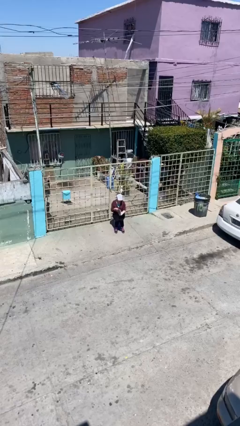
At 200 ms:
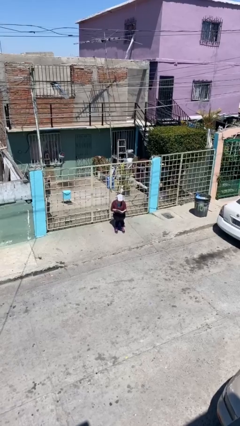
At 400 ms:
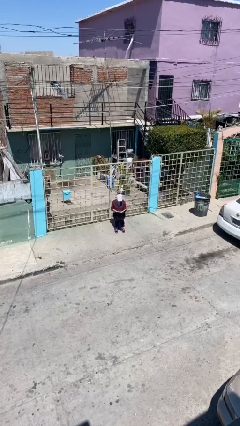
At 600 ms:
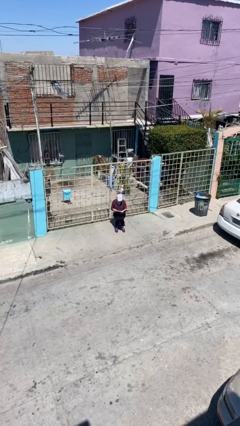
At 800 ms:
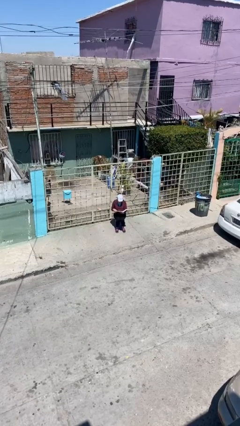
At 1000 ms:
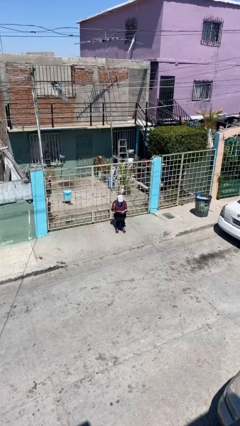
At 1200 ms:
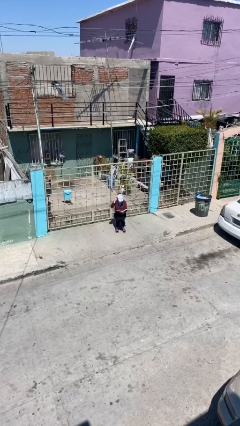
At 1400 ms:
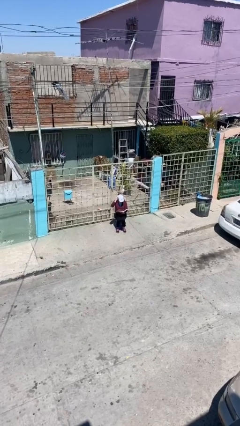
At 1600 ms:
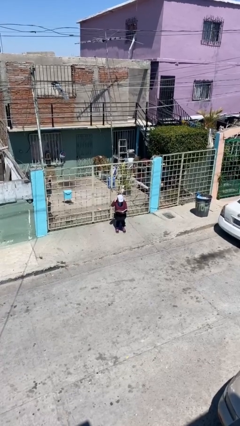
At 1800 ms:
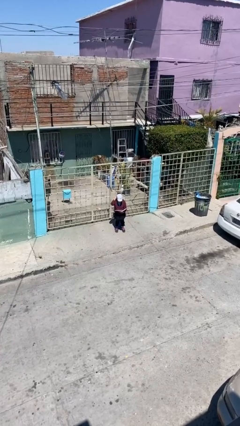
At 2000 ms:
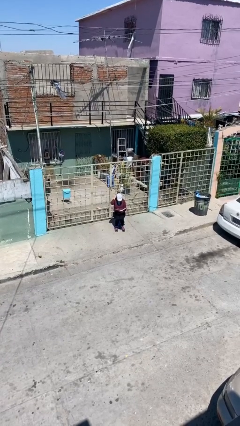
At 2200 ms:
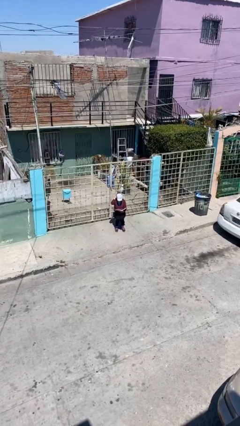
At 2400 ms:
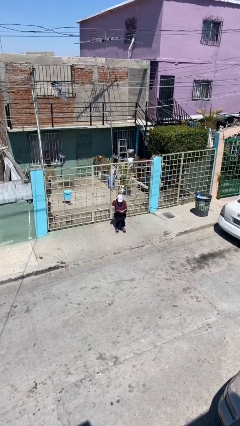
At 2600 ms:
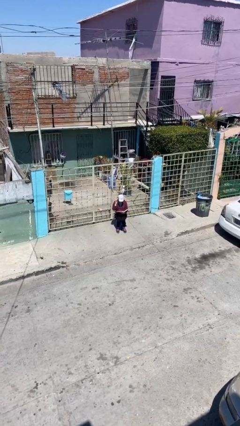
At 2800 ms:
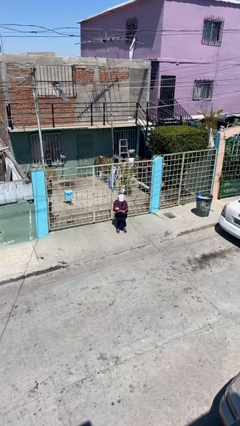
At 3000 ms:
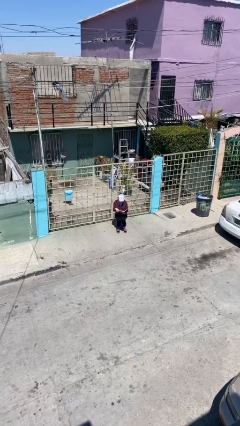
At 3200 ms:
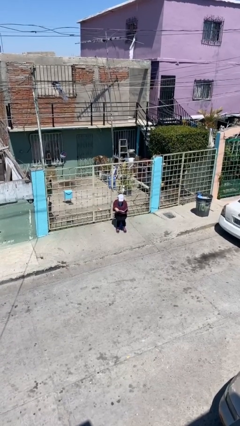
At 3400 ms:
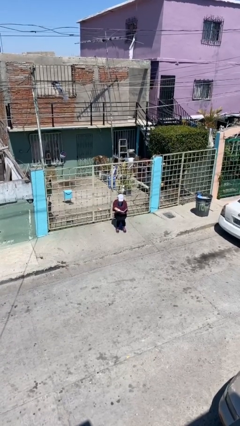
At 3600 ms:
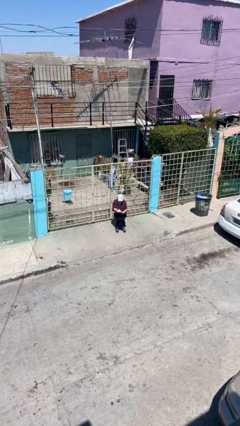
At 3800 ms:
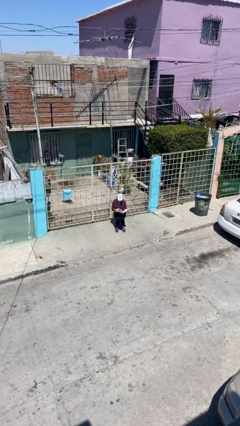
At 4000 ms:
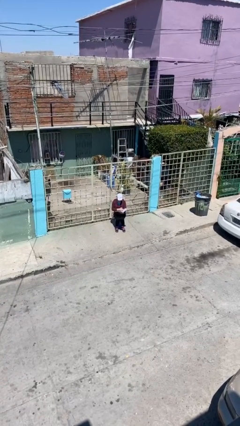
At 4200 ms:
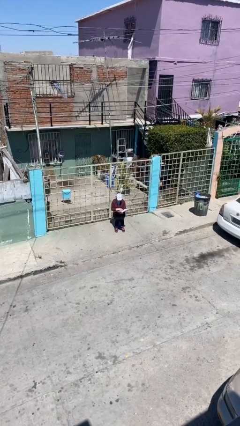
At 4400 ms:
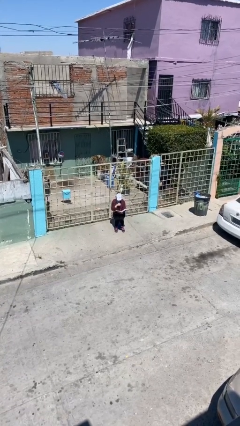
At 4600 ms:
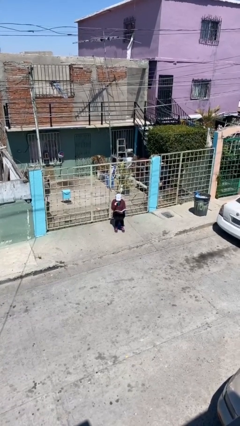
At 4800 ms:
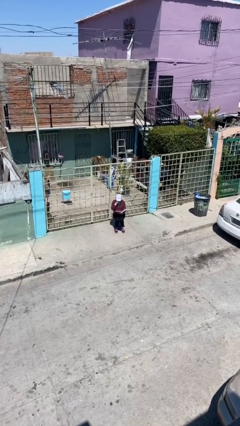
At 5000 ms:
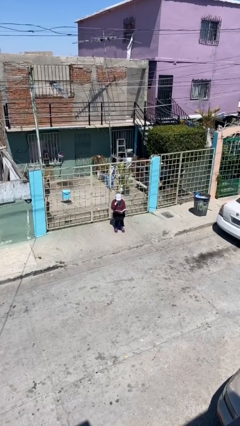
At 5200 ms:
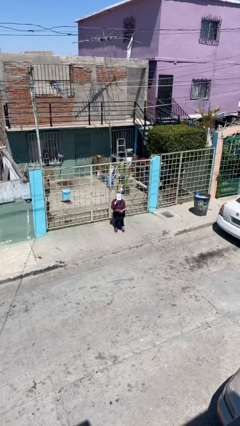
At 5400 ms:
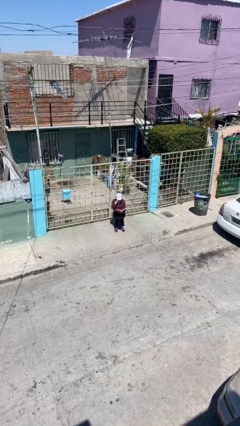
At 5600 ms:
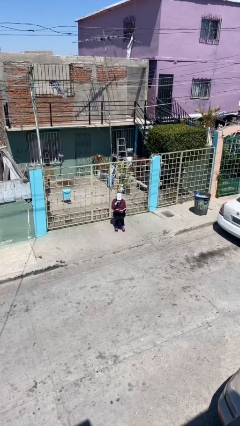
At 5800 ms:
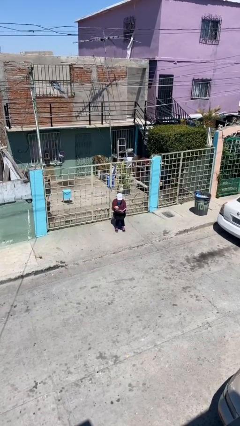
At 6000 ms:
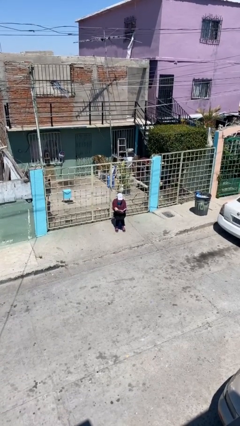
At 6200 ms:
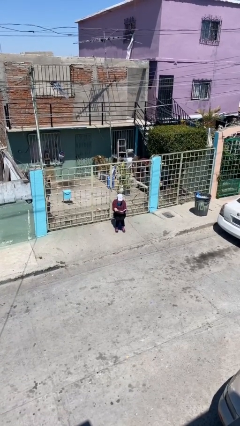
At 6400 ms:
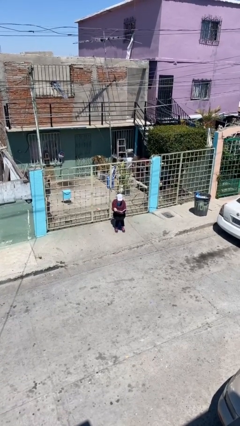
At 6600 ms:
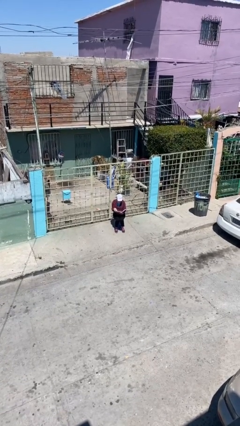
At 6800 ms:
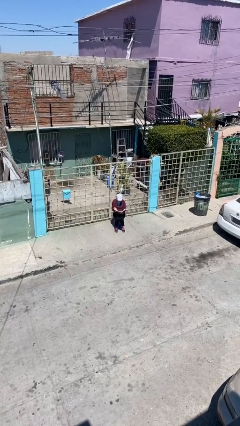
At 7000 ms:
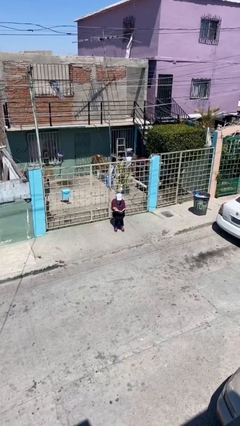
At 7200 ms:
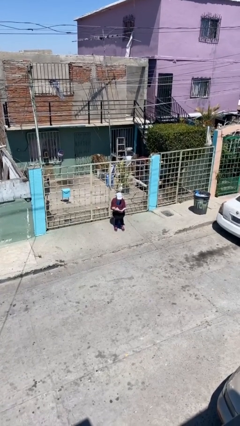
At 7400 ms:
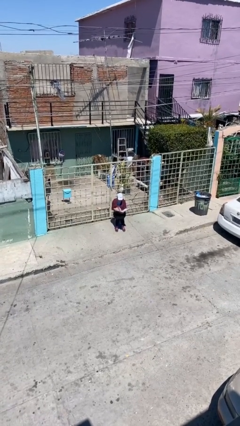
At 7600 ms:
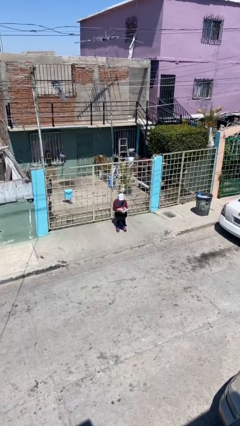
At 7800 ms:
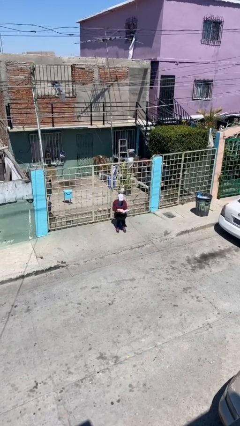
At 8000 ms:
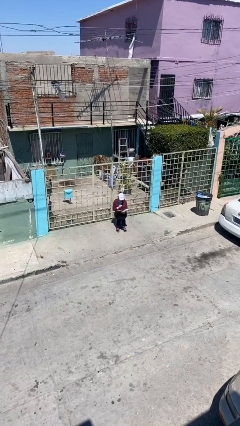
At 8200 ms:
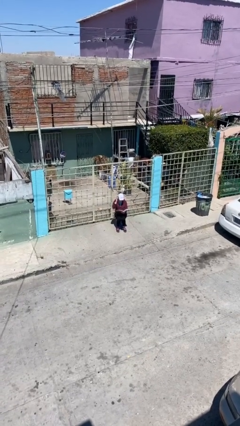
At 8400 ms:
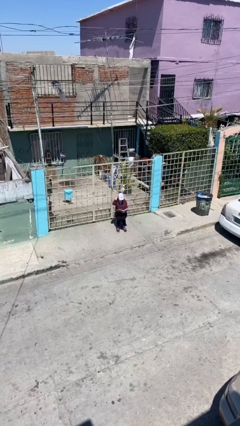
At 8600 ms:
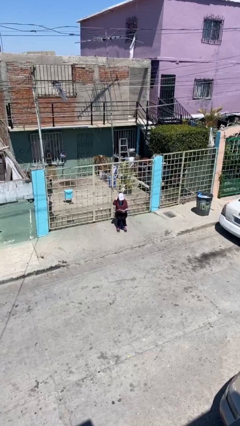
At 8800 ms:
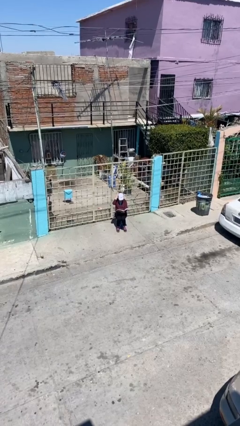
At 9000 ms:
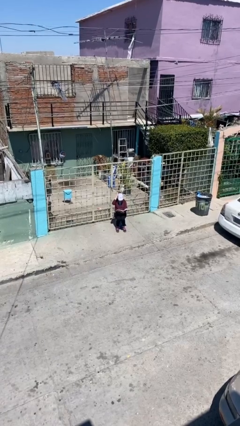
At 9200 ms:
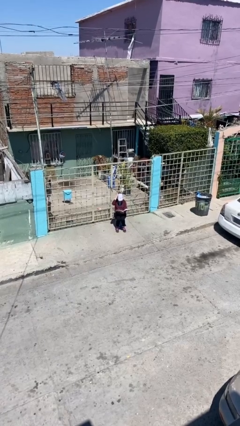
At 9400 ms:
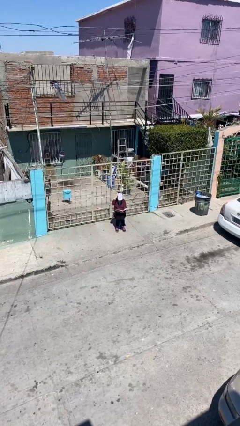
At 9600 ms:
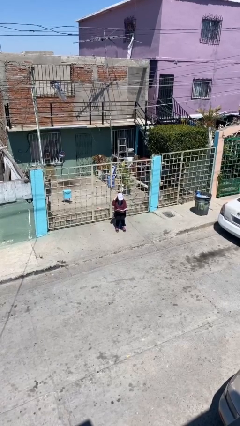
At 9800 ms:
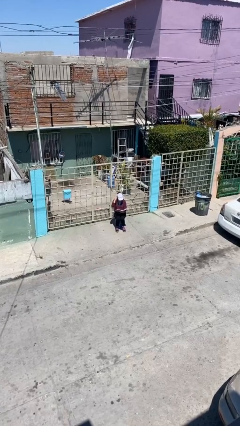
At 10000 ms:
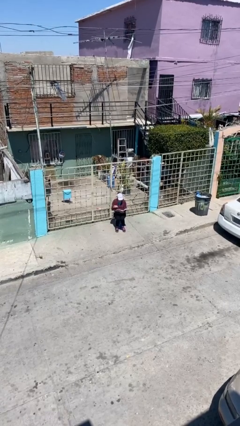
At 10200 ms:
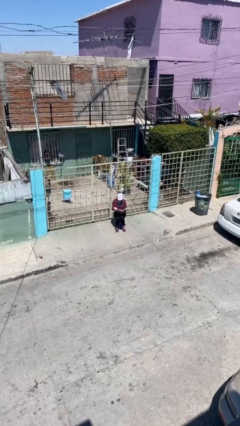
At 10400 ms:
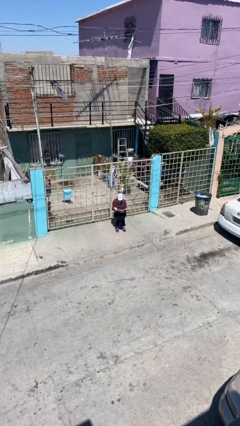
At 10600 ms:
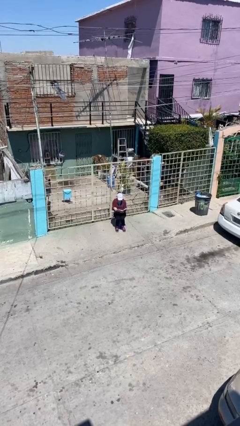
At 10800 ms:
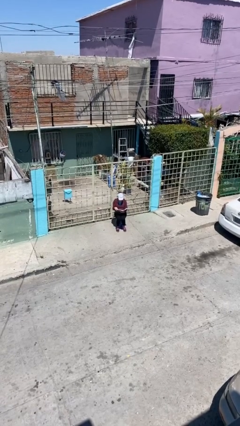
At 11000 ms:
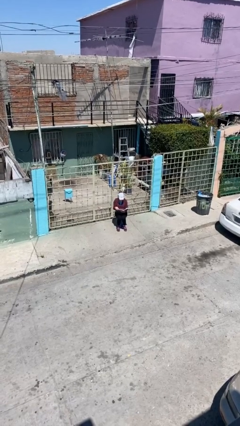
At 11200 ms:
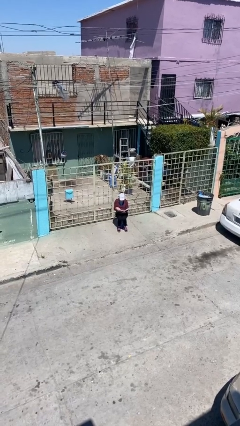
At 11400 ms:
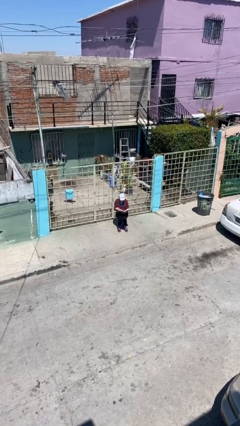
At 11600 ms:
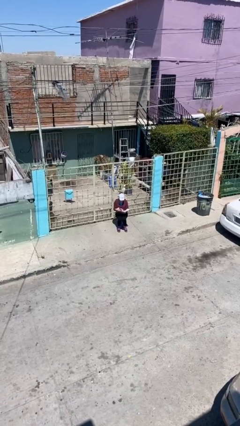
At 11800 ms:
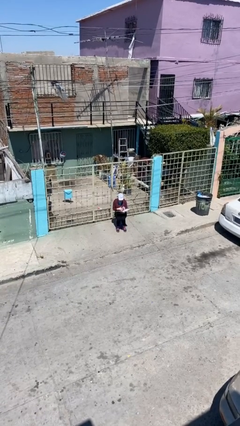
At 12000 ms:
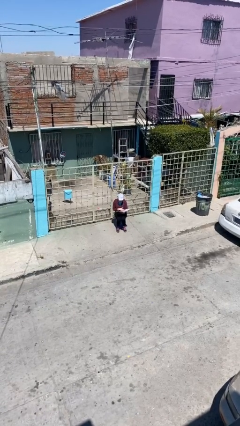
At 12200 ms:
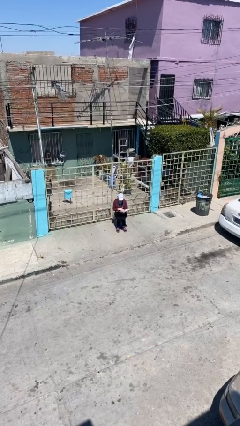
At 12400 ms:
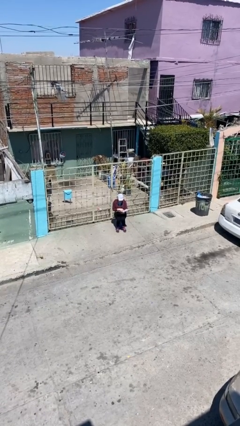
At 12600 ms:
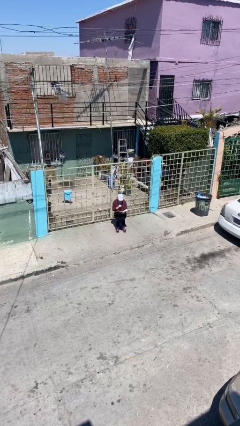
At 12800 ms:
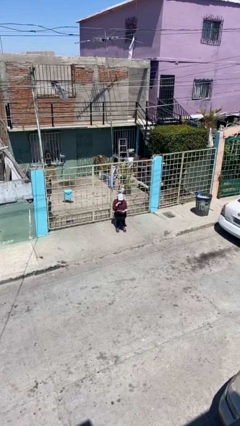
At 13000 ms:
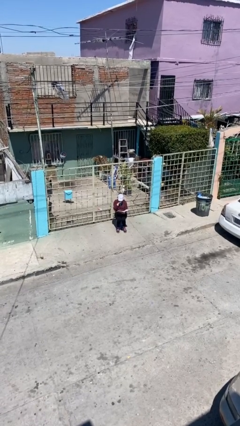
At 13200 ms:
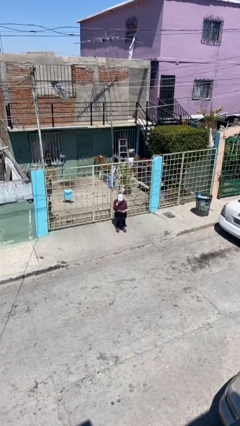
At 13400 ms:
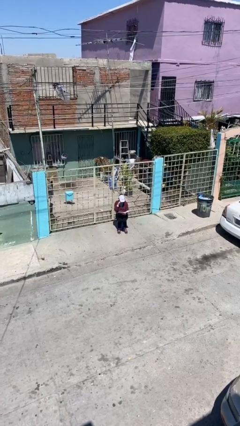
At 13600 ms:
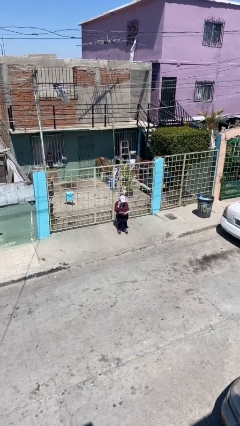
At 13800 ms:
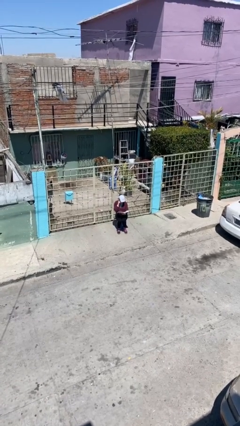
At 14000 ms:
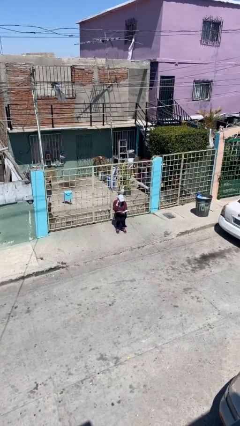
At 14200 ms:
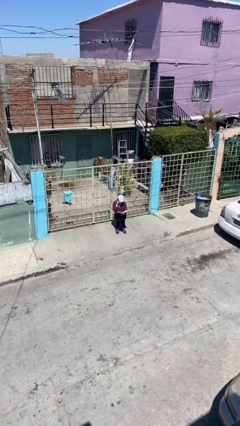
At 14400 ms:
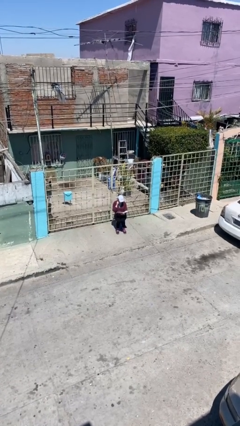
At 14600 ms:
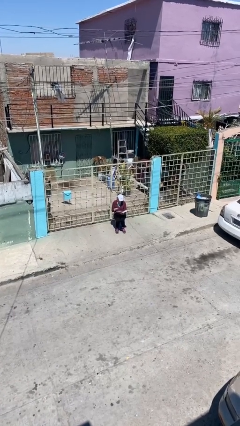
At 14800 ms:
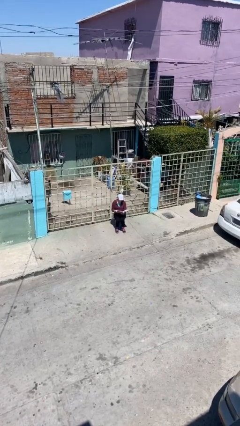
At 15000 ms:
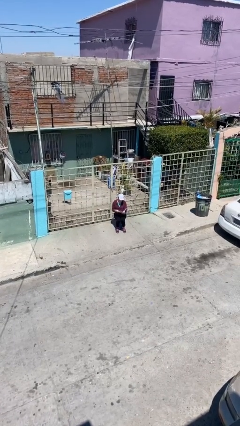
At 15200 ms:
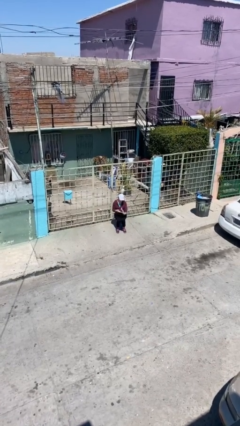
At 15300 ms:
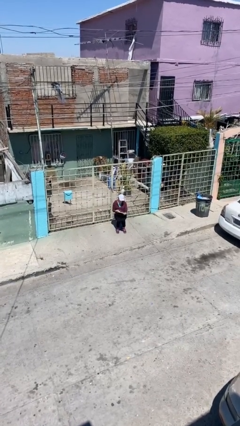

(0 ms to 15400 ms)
person reads document

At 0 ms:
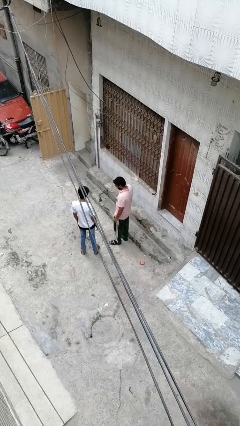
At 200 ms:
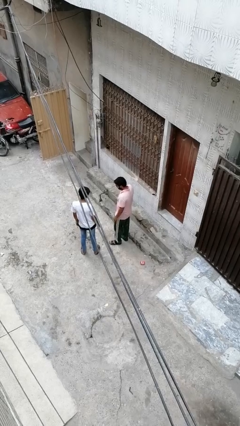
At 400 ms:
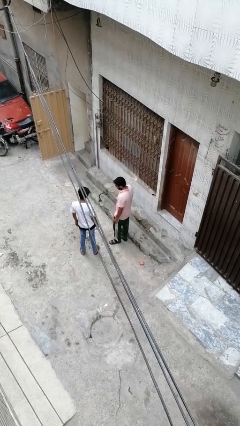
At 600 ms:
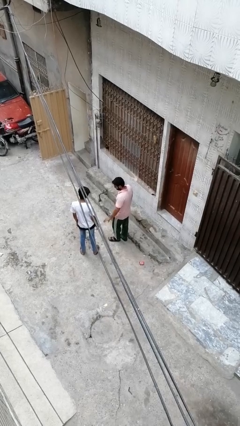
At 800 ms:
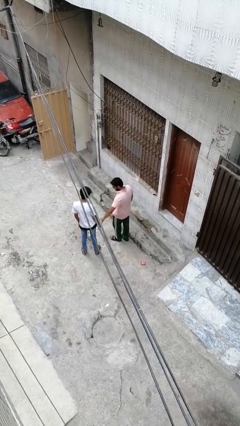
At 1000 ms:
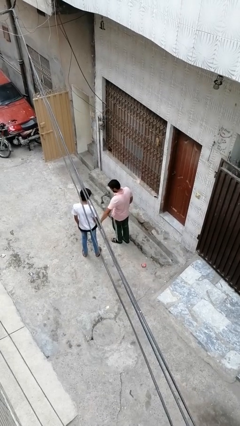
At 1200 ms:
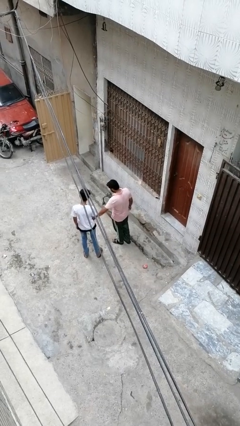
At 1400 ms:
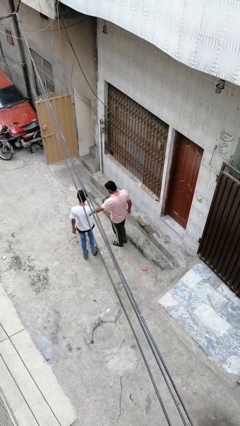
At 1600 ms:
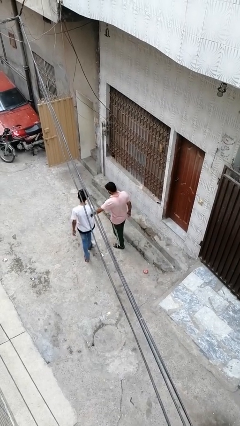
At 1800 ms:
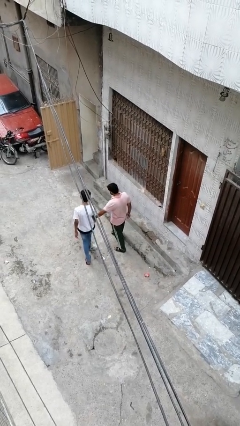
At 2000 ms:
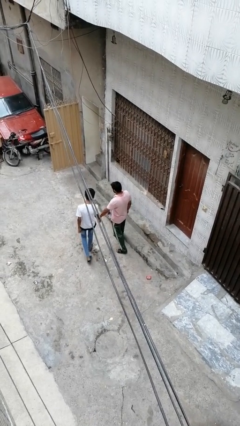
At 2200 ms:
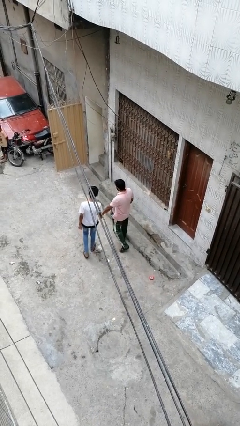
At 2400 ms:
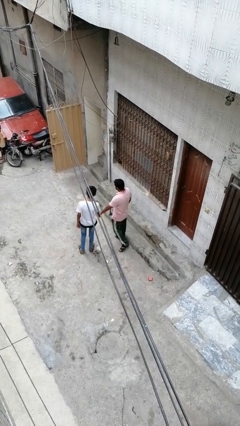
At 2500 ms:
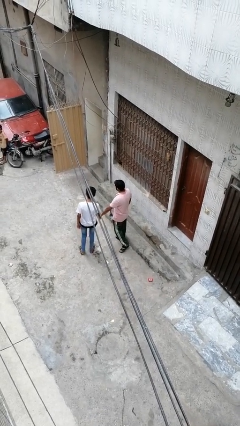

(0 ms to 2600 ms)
person grabs person by forearm
